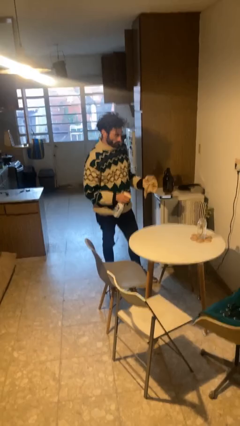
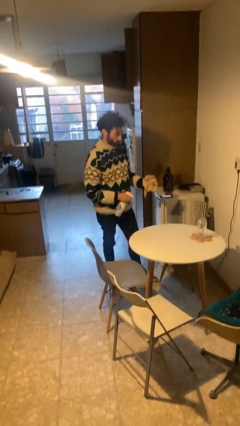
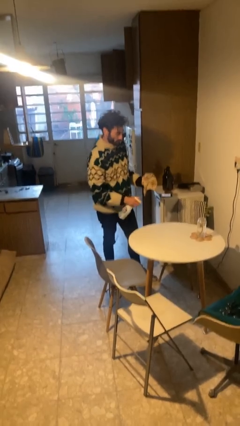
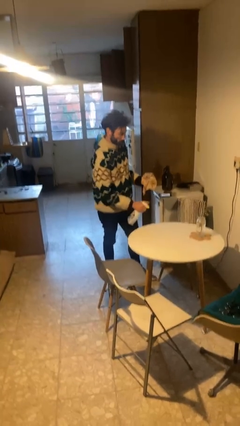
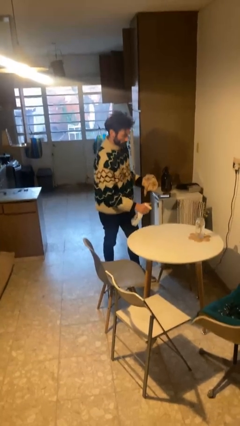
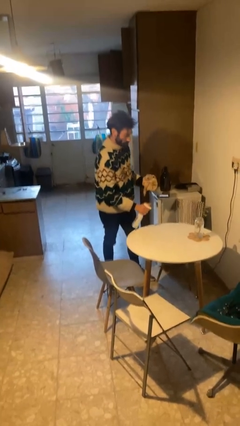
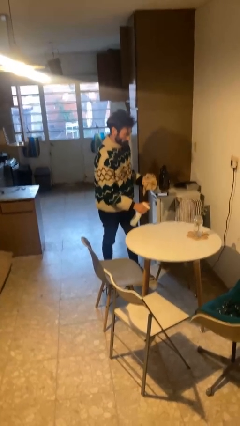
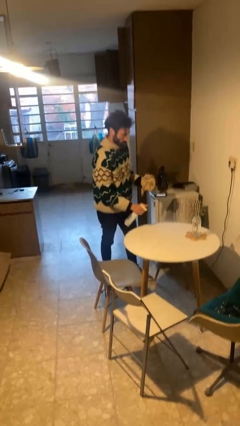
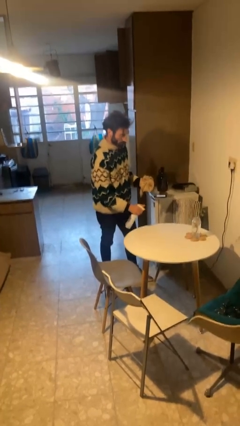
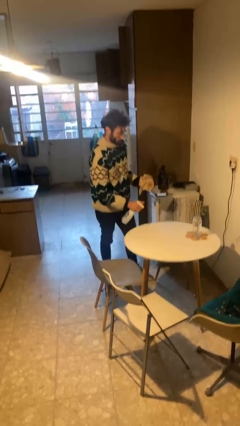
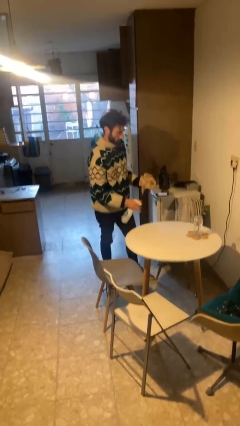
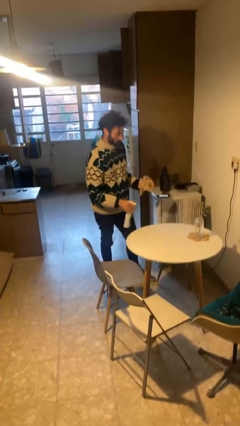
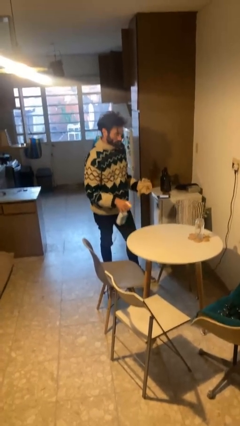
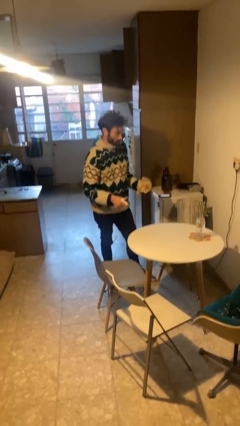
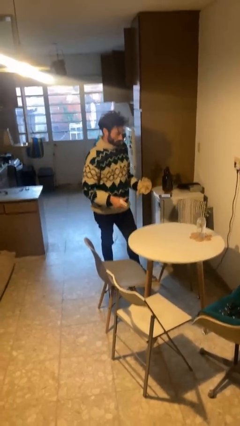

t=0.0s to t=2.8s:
person sprays from bottle

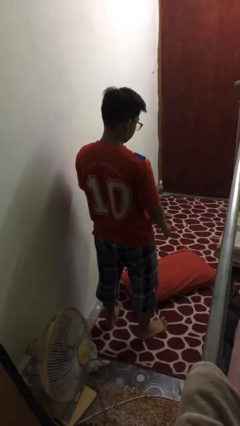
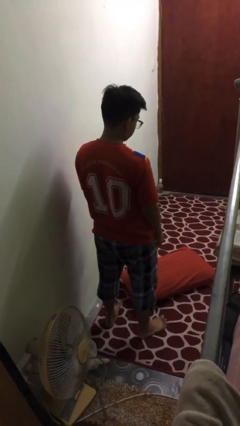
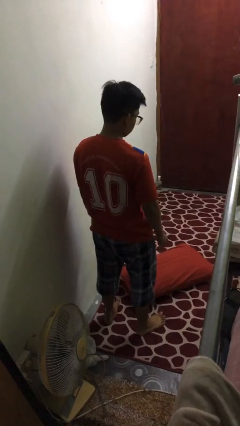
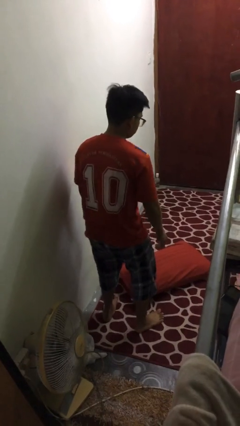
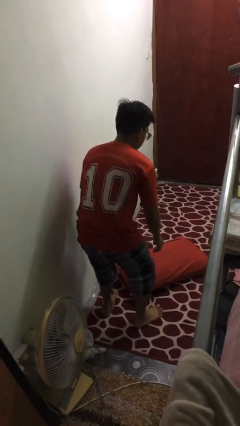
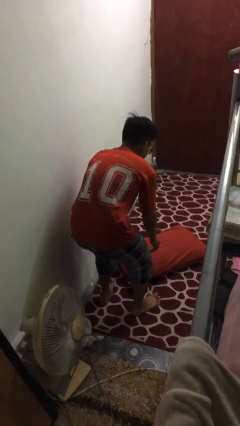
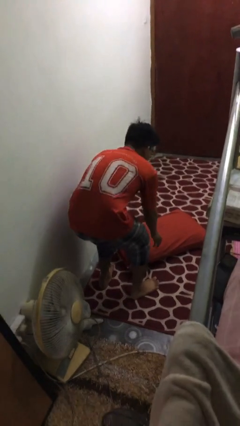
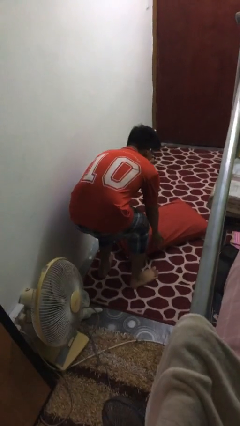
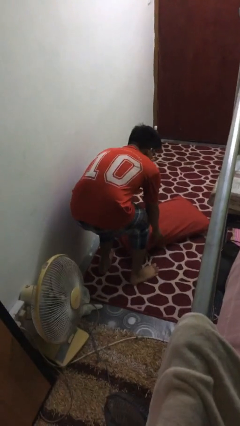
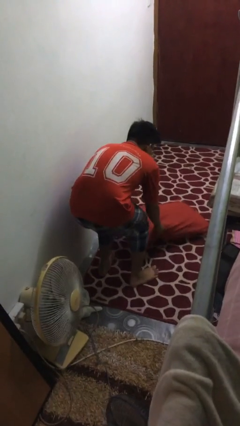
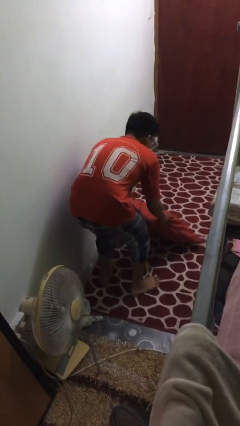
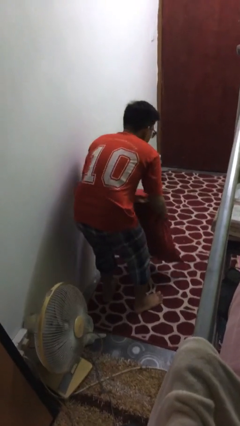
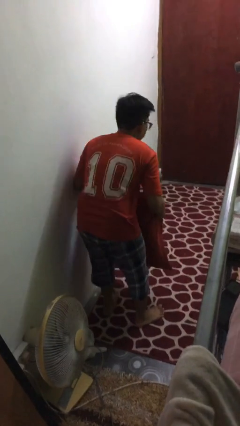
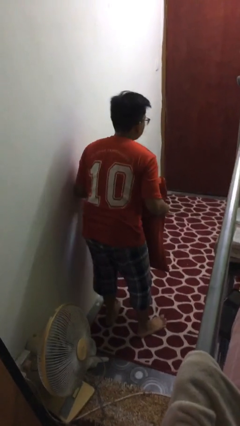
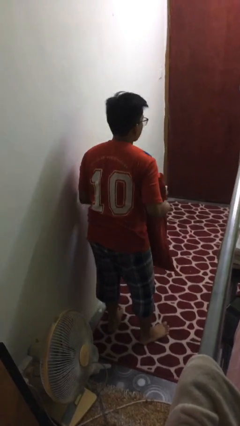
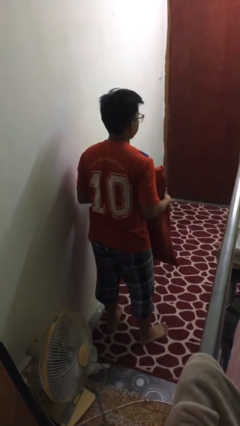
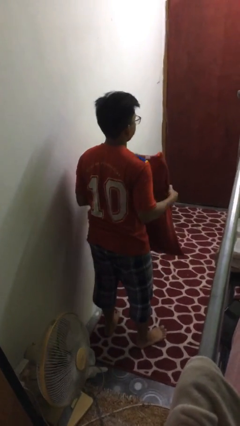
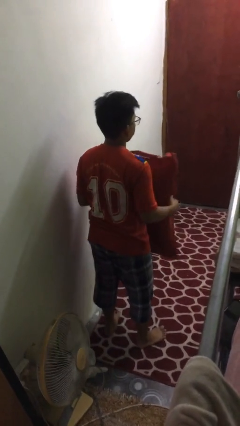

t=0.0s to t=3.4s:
person picks up object from floor

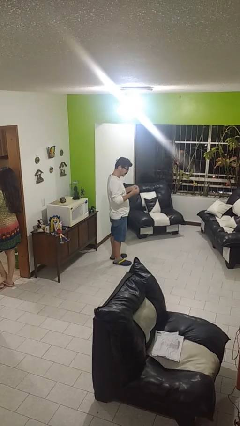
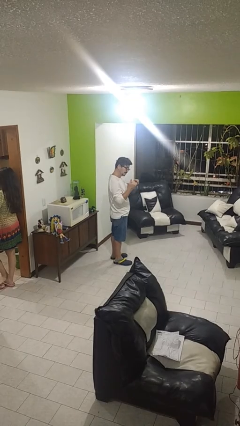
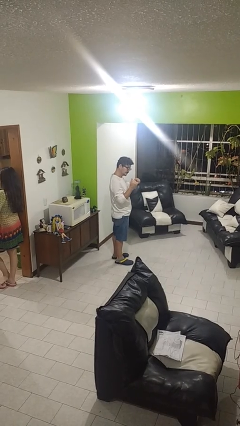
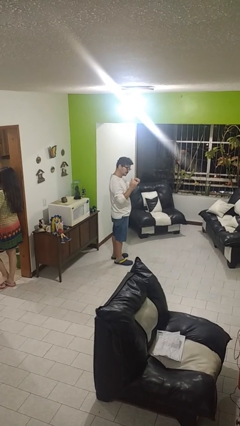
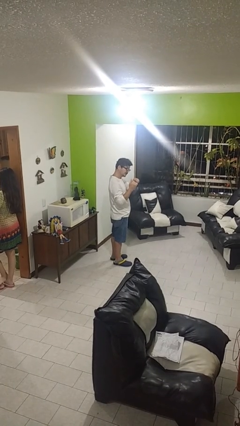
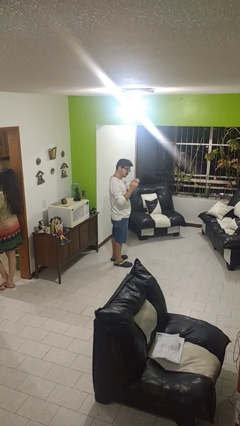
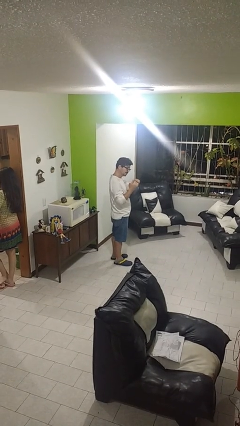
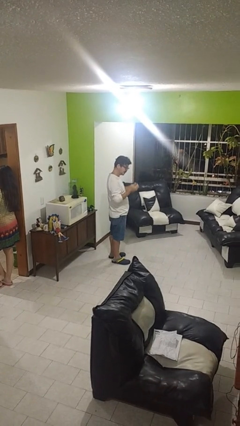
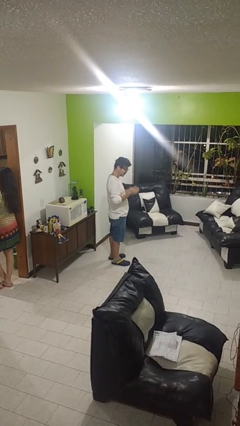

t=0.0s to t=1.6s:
person clips fingernails

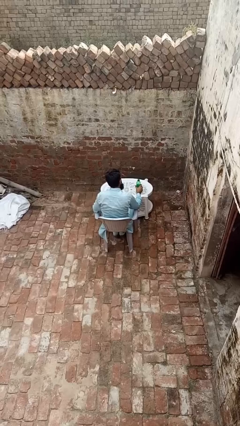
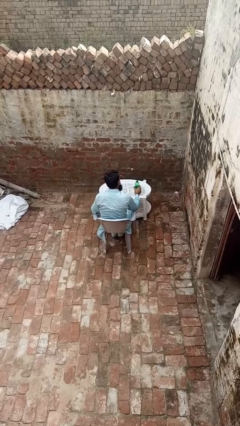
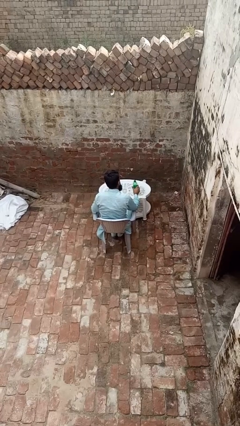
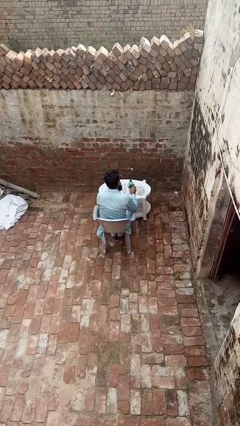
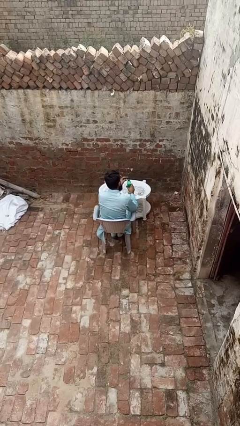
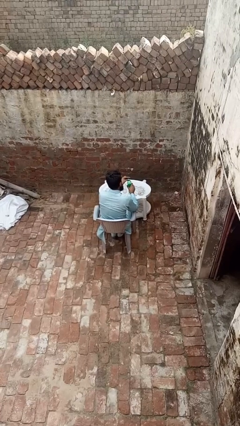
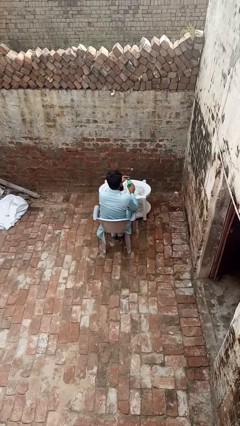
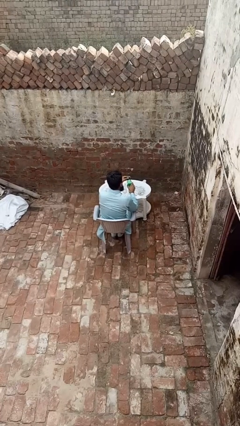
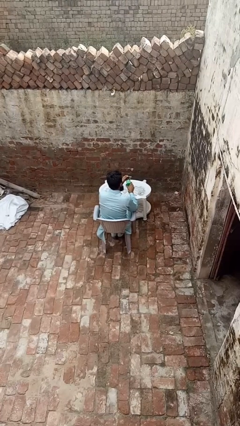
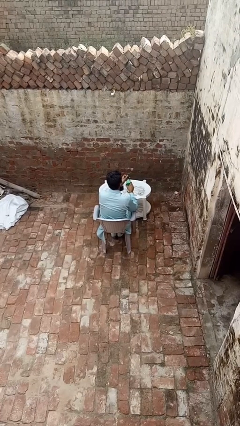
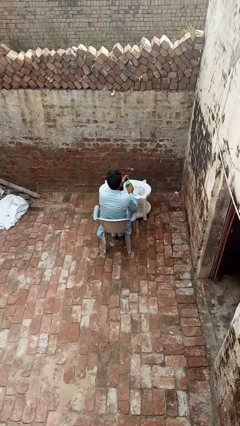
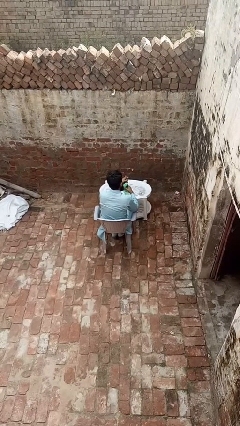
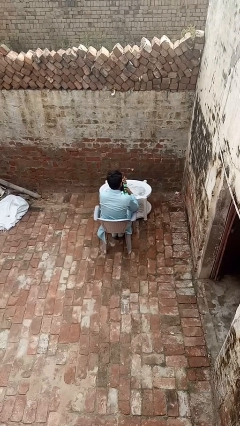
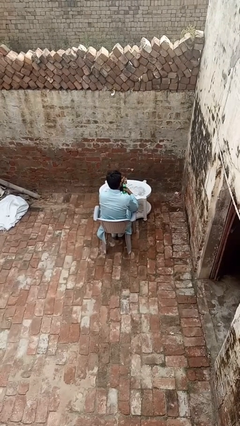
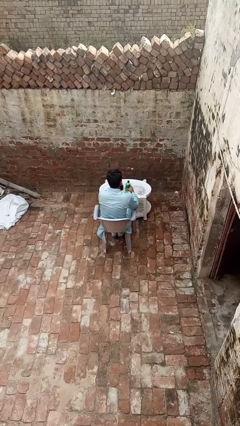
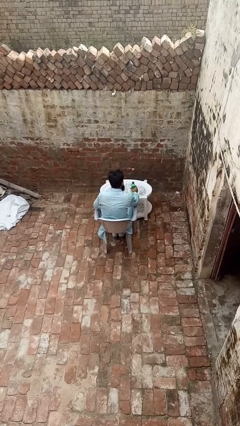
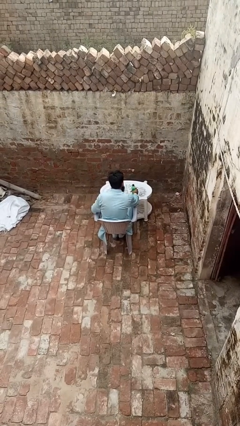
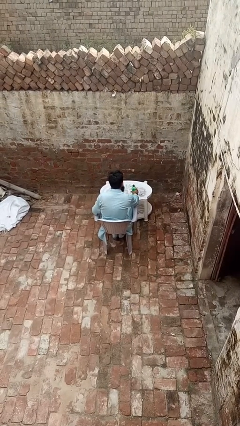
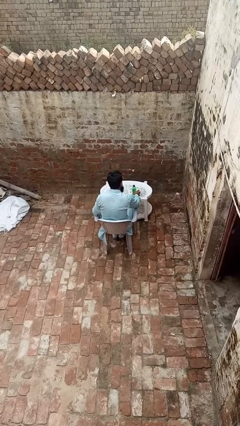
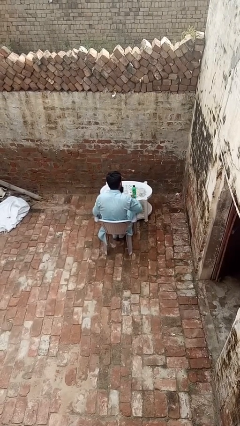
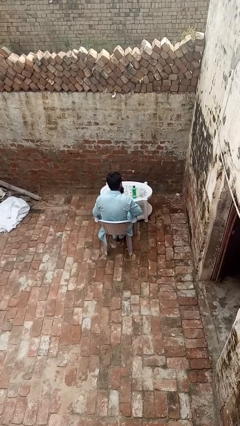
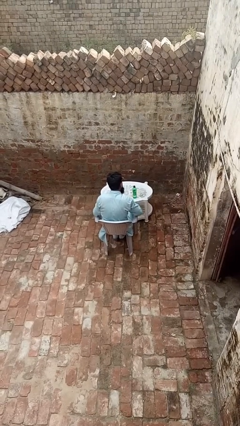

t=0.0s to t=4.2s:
person screws lid to bottle

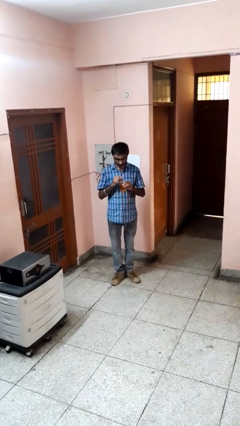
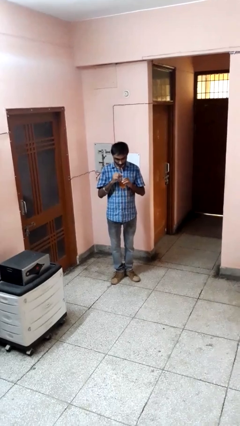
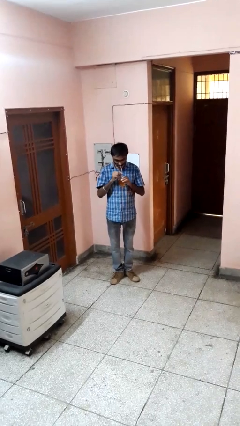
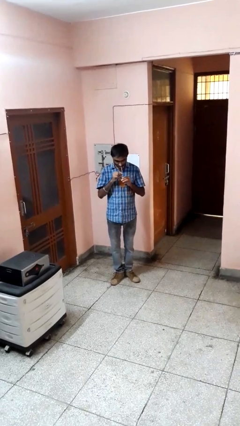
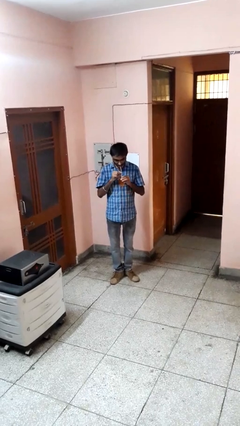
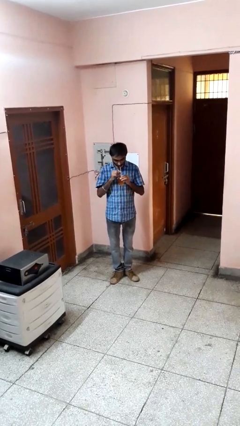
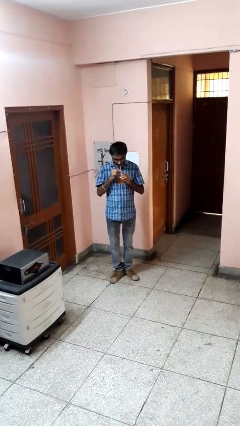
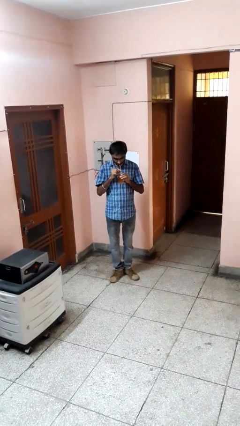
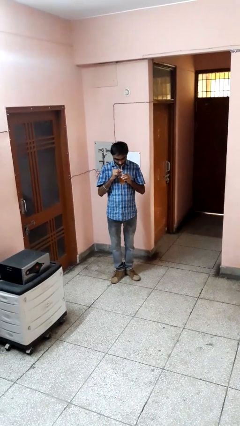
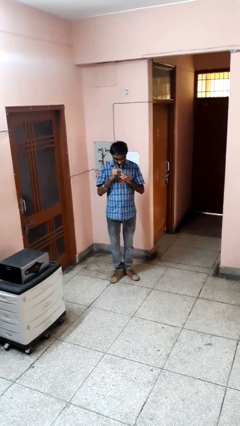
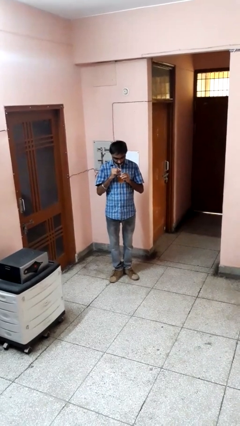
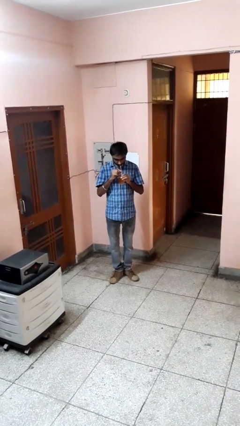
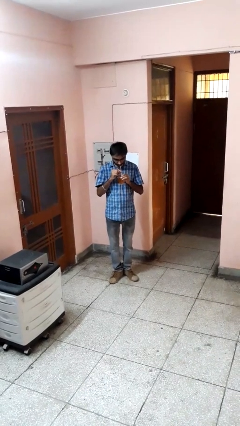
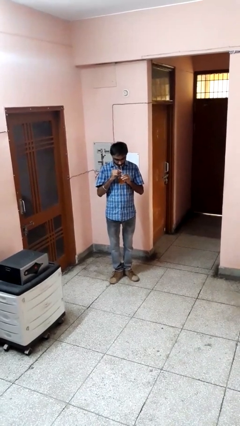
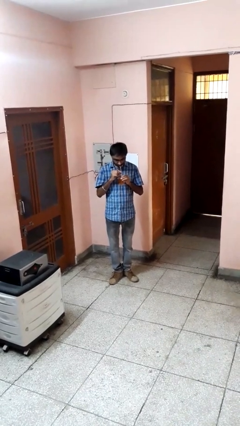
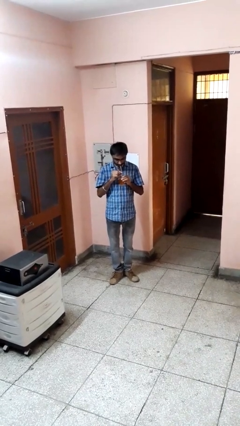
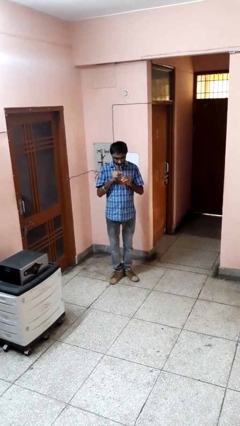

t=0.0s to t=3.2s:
person drinks from straw

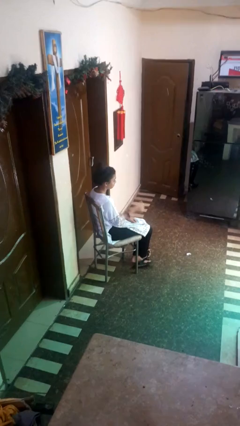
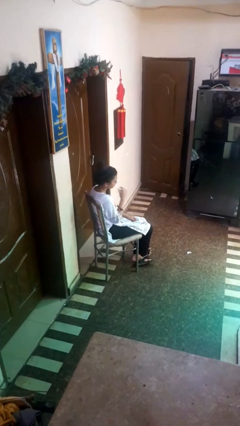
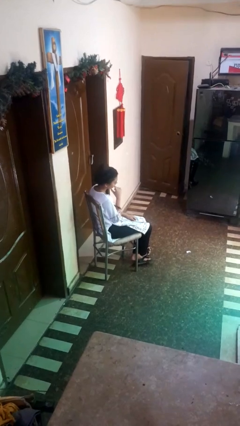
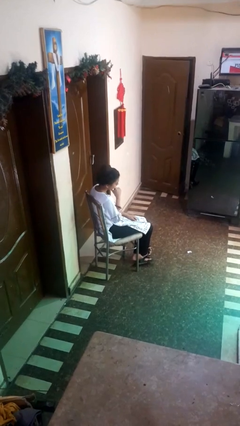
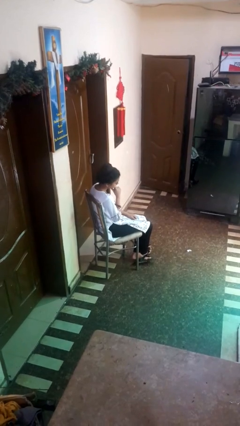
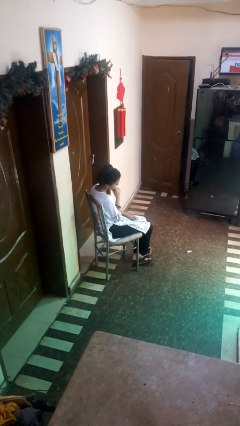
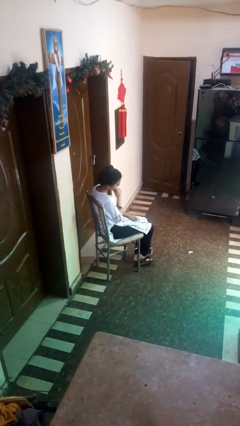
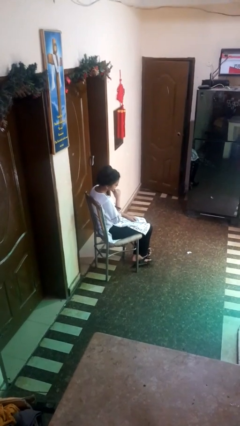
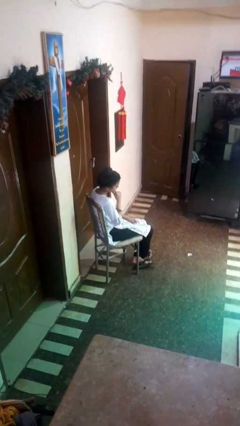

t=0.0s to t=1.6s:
person strokes chin

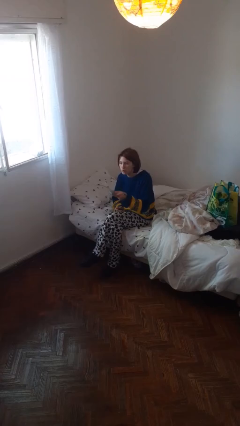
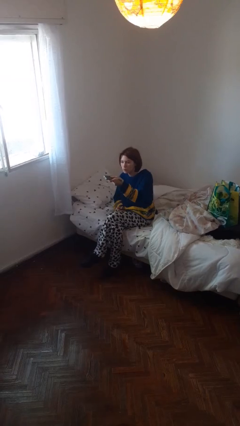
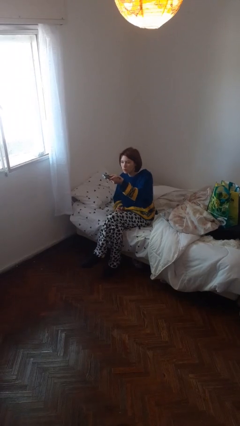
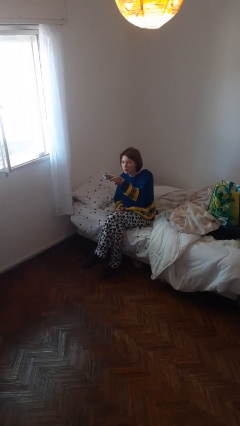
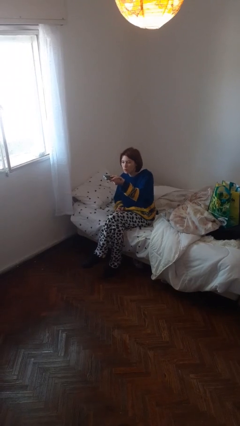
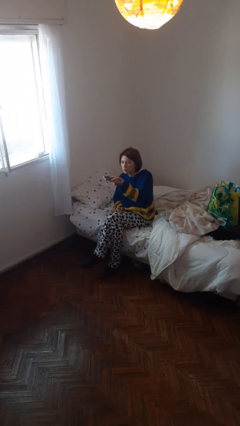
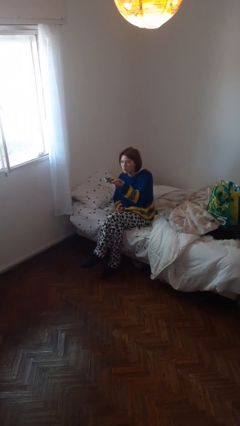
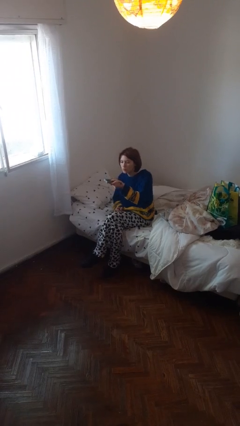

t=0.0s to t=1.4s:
person uses television remote
